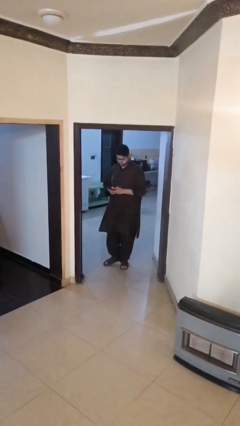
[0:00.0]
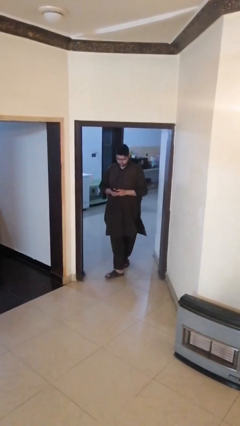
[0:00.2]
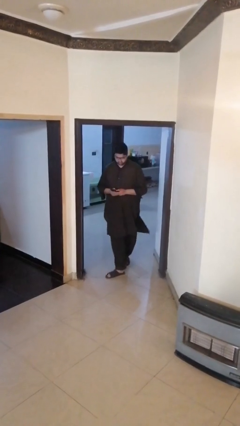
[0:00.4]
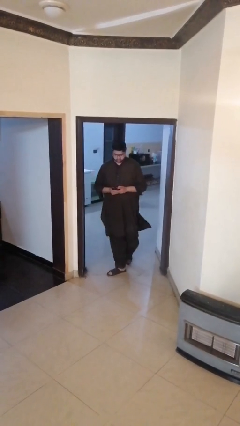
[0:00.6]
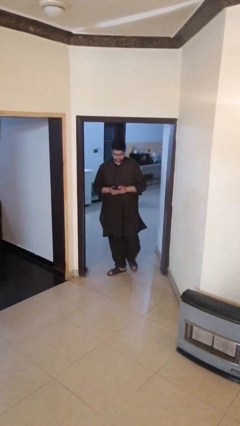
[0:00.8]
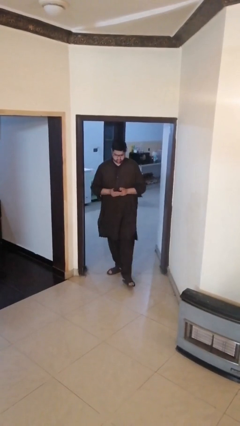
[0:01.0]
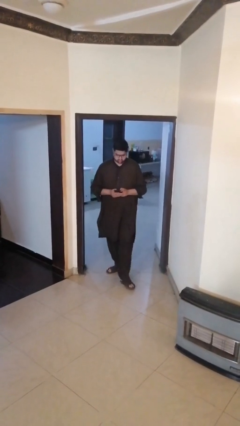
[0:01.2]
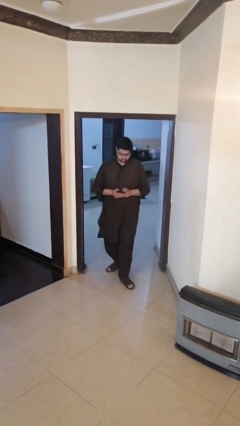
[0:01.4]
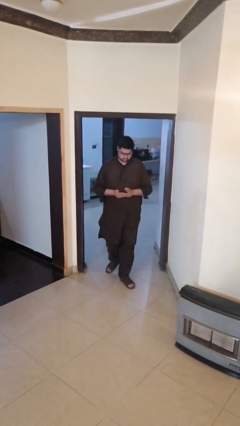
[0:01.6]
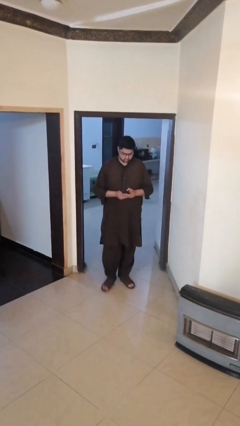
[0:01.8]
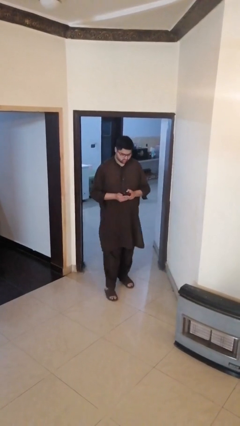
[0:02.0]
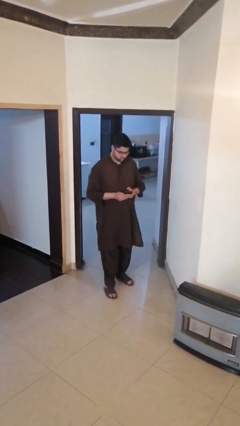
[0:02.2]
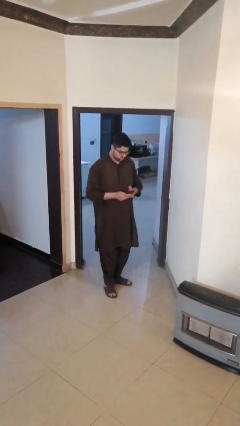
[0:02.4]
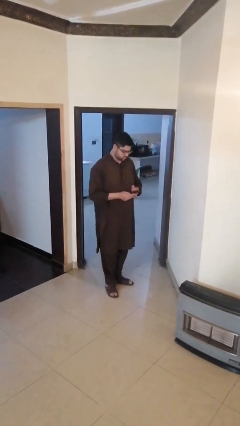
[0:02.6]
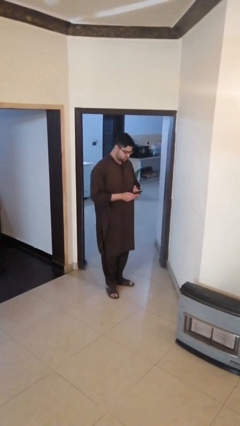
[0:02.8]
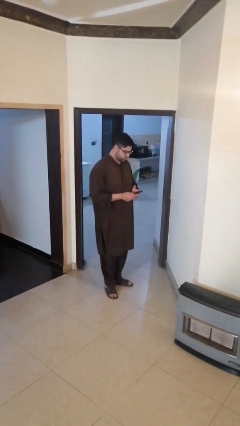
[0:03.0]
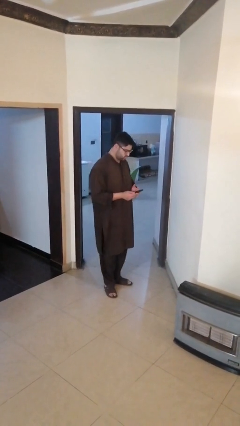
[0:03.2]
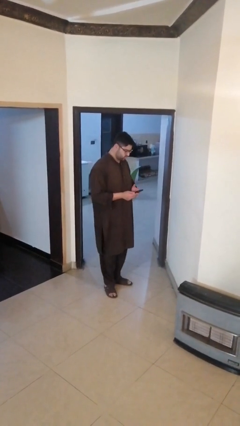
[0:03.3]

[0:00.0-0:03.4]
person enters scene through structure

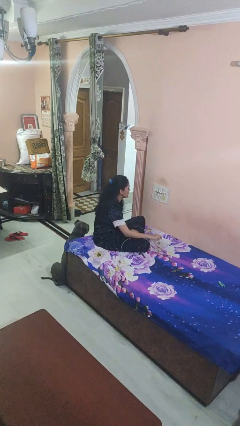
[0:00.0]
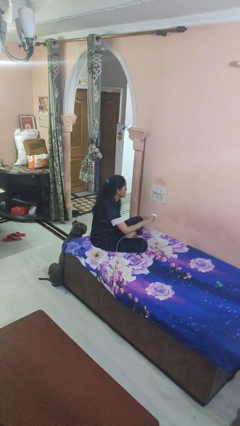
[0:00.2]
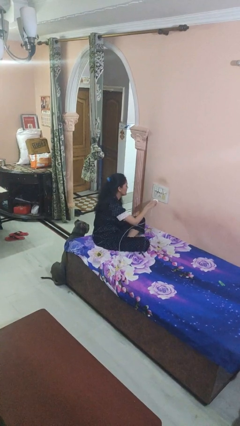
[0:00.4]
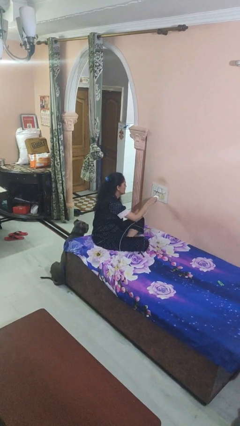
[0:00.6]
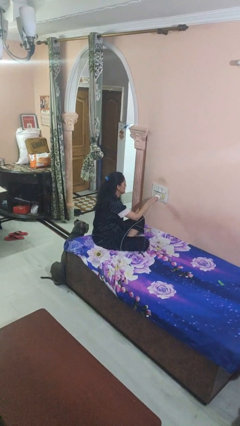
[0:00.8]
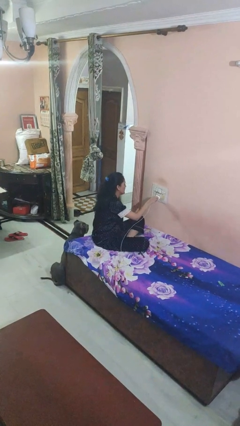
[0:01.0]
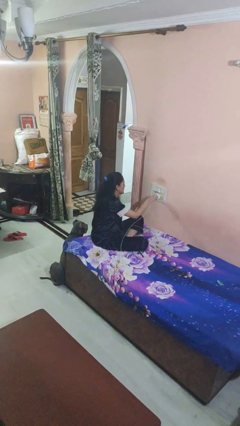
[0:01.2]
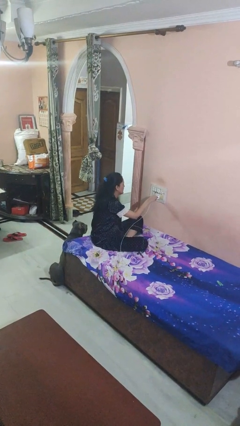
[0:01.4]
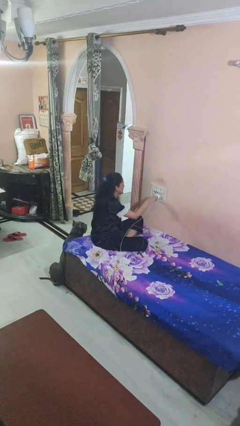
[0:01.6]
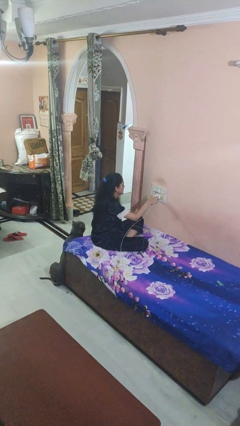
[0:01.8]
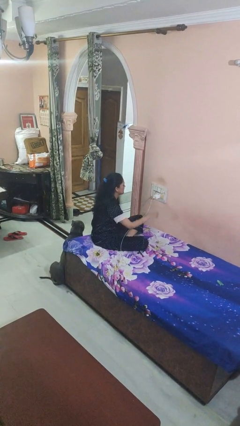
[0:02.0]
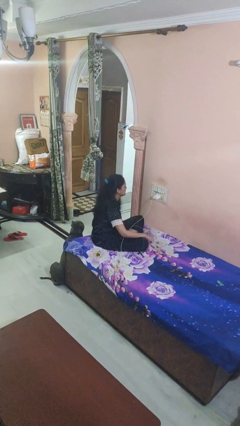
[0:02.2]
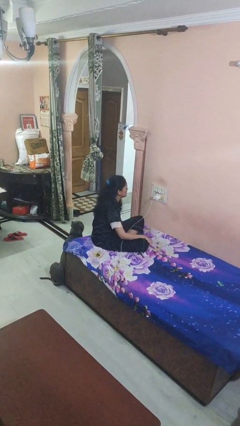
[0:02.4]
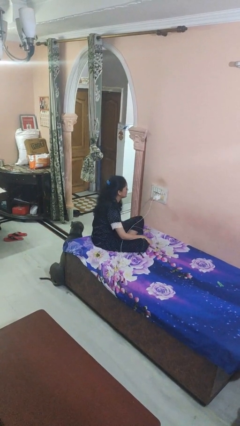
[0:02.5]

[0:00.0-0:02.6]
person plugs into electrical socket
